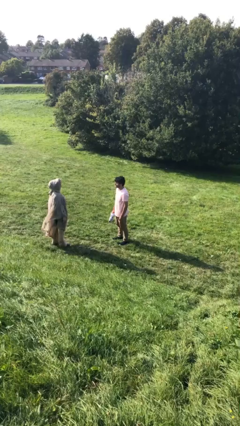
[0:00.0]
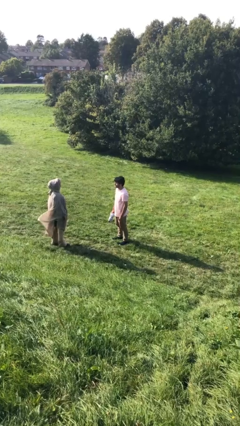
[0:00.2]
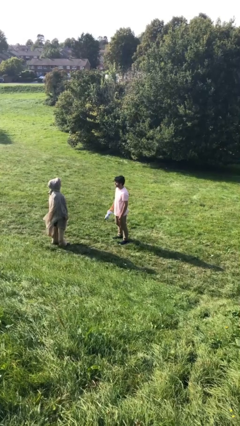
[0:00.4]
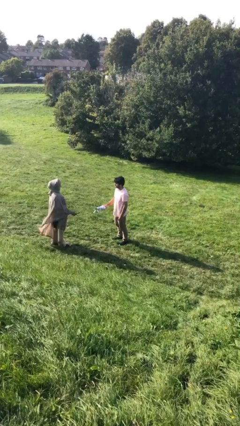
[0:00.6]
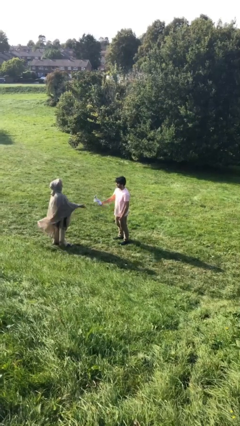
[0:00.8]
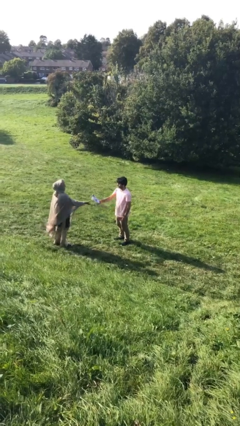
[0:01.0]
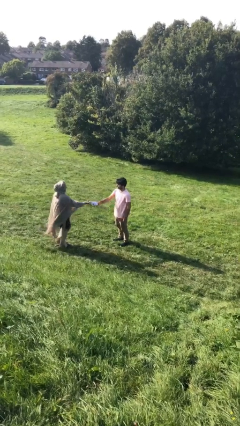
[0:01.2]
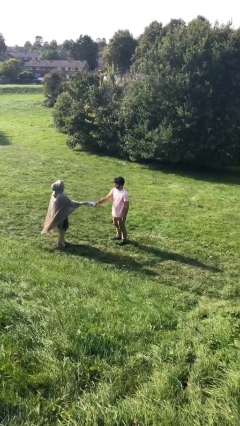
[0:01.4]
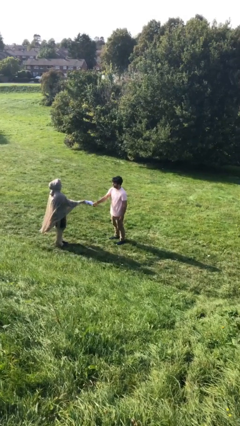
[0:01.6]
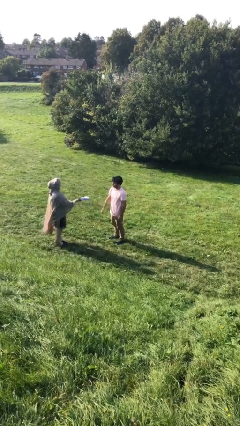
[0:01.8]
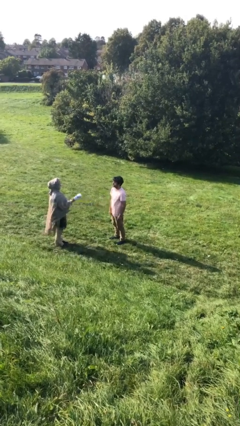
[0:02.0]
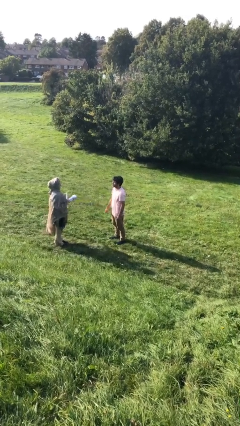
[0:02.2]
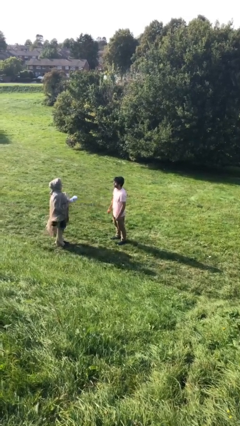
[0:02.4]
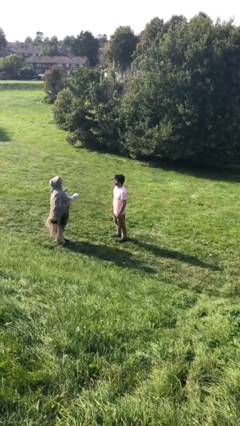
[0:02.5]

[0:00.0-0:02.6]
person transfers object to person

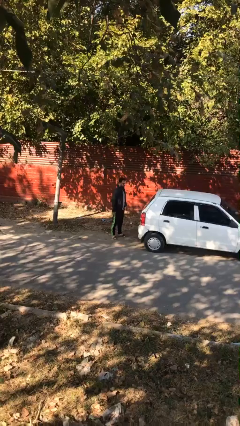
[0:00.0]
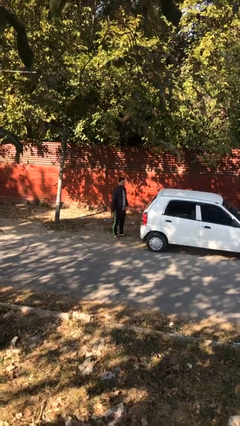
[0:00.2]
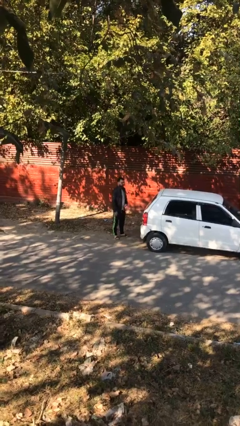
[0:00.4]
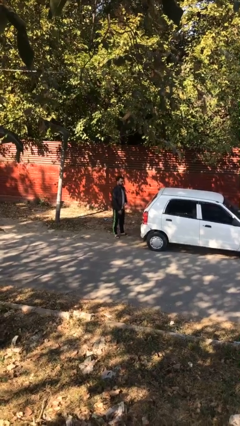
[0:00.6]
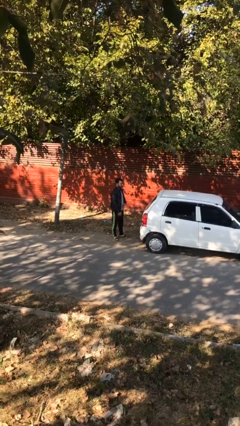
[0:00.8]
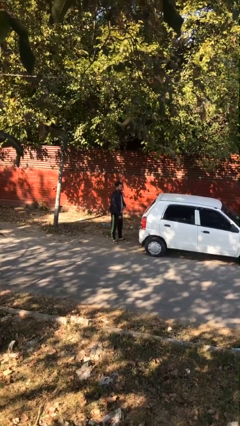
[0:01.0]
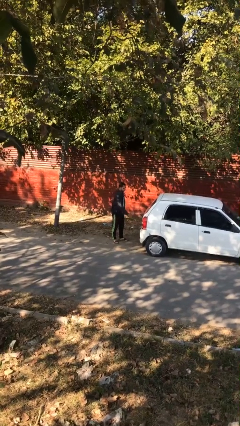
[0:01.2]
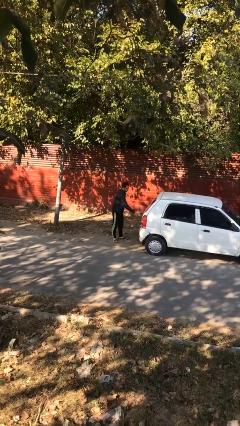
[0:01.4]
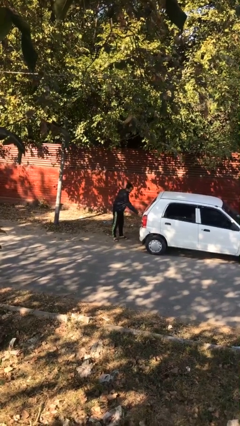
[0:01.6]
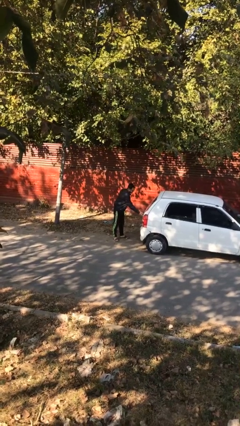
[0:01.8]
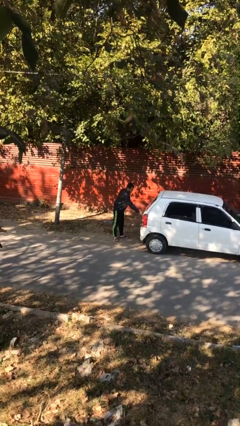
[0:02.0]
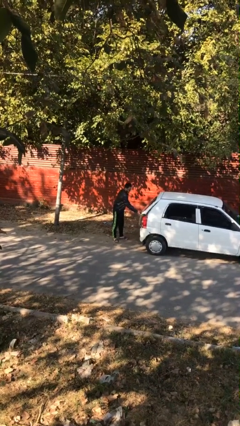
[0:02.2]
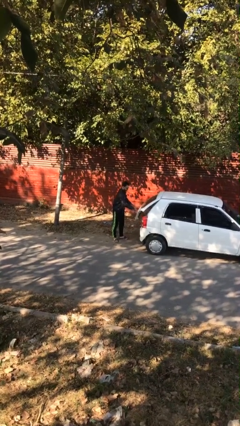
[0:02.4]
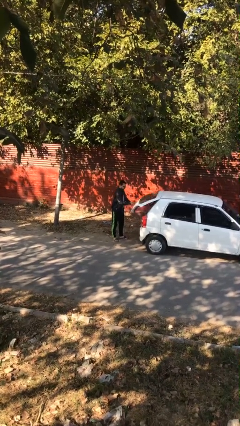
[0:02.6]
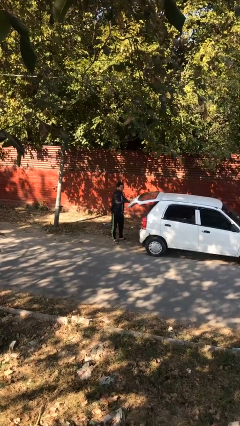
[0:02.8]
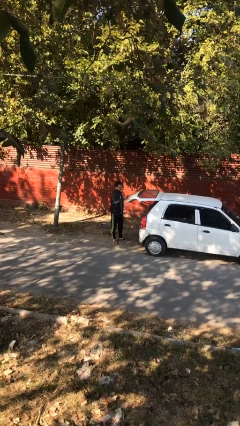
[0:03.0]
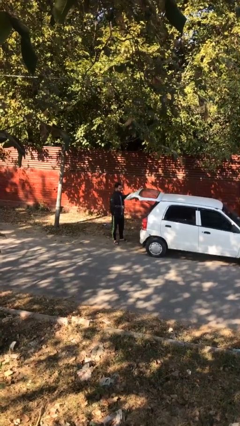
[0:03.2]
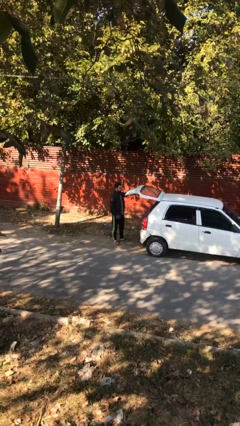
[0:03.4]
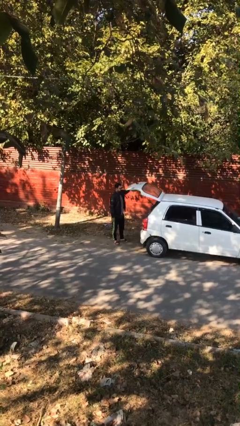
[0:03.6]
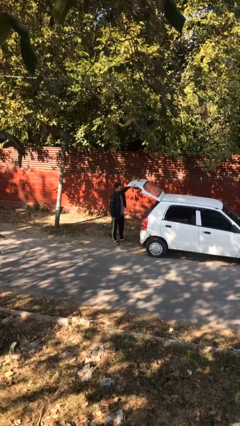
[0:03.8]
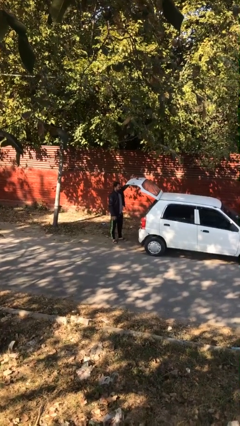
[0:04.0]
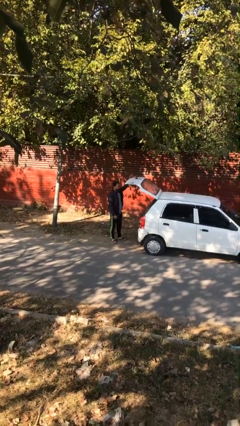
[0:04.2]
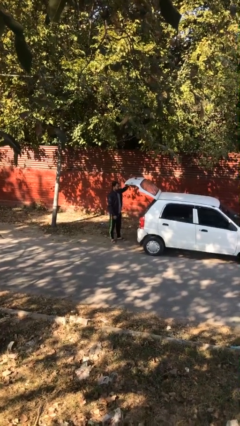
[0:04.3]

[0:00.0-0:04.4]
person opens car trunk

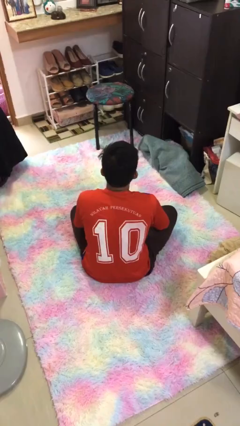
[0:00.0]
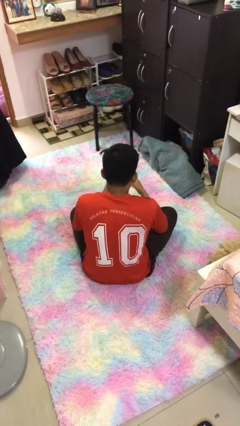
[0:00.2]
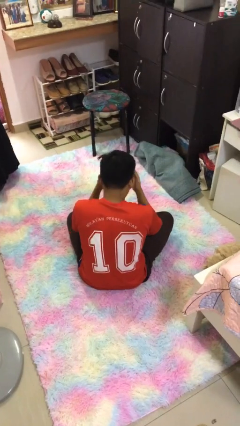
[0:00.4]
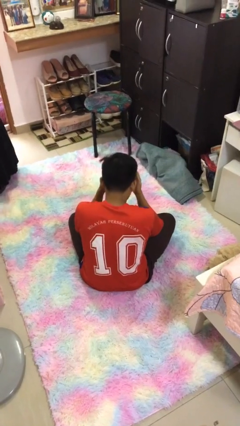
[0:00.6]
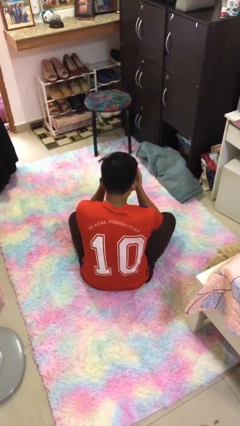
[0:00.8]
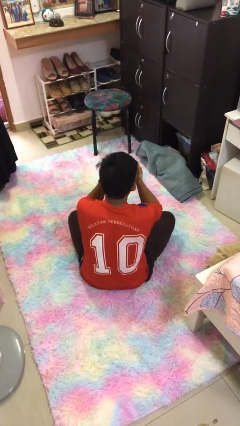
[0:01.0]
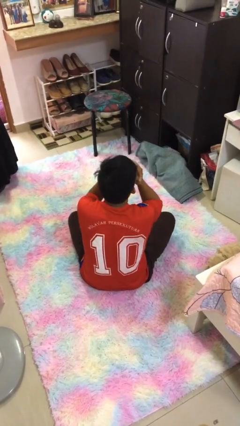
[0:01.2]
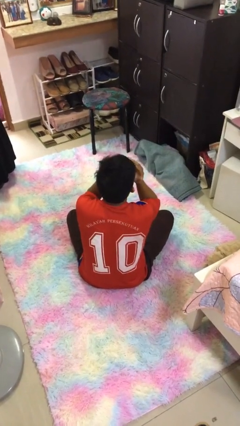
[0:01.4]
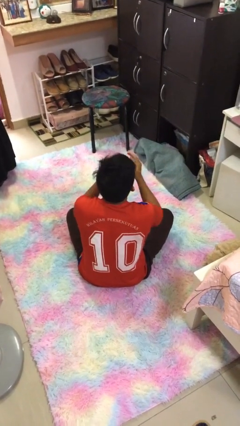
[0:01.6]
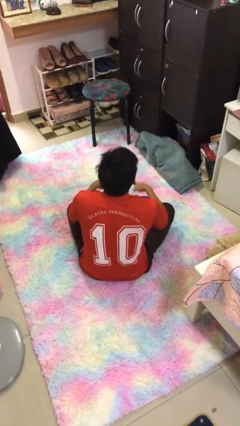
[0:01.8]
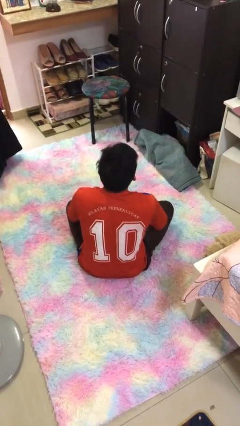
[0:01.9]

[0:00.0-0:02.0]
person covers face with hands

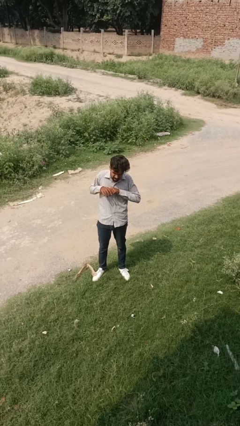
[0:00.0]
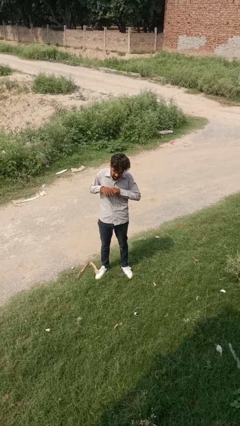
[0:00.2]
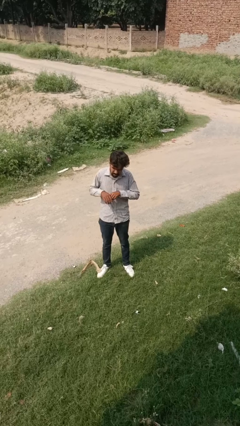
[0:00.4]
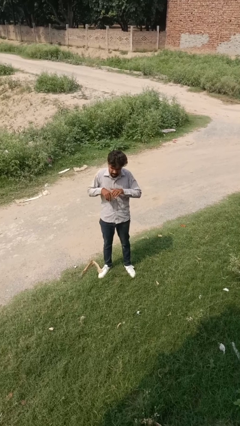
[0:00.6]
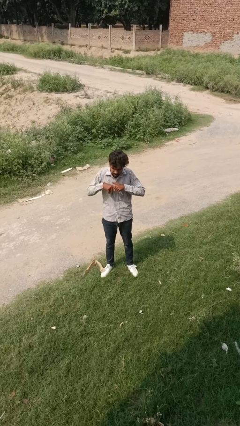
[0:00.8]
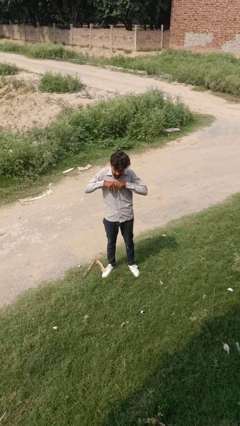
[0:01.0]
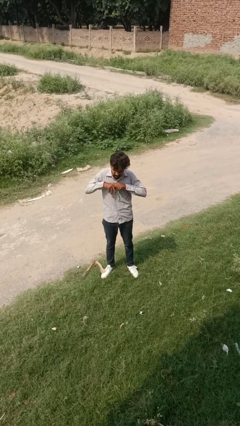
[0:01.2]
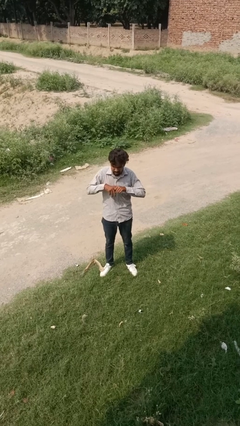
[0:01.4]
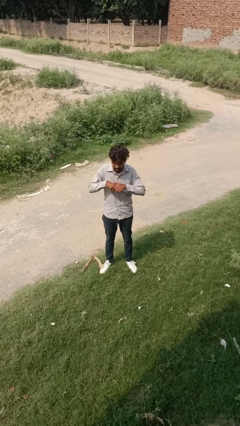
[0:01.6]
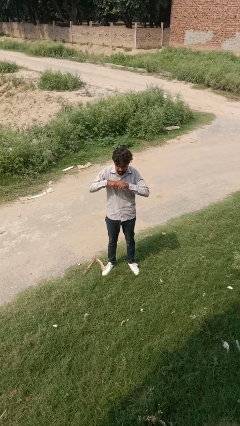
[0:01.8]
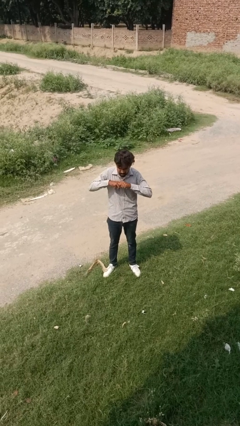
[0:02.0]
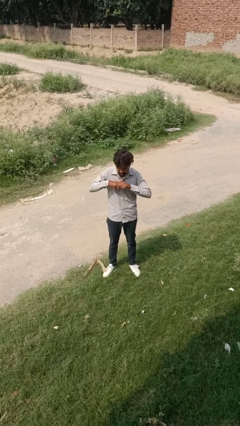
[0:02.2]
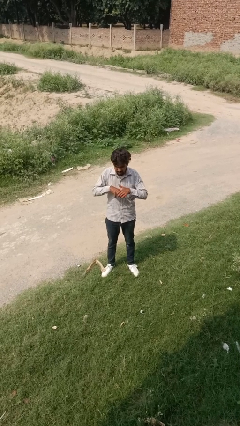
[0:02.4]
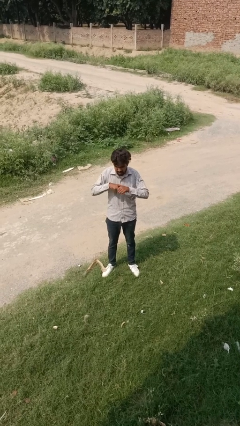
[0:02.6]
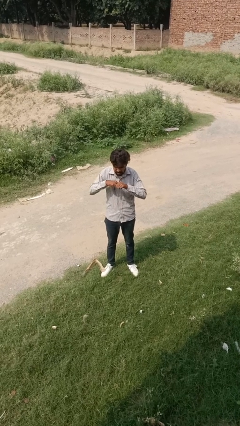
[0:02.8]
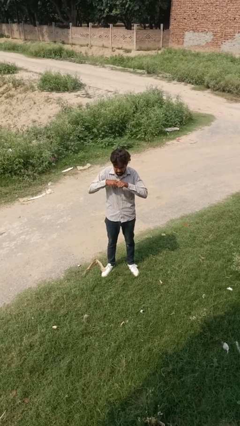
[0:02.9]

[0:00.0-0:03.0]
person cracks knuckles

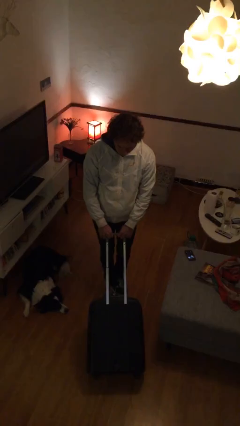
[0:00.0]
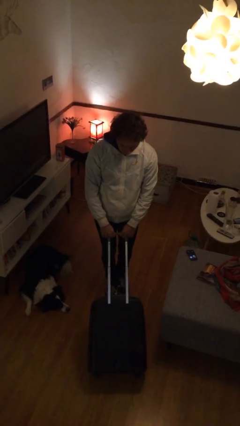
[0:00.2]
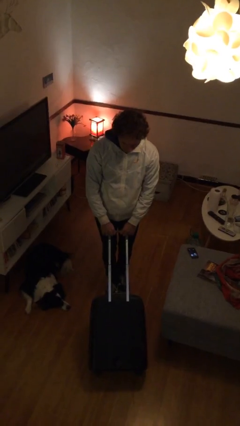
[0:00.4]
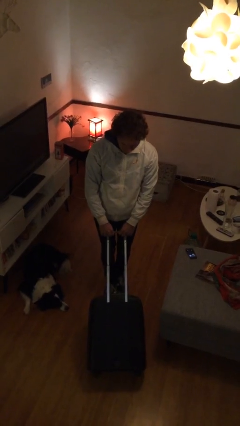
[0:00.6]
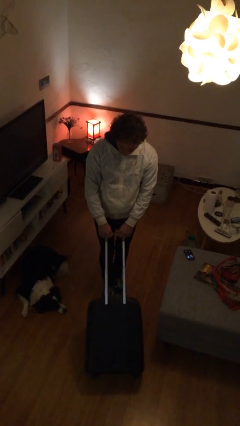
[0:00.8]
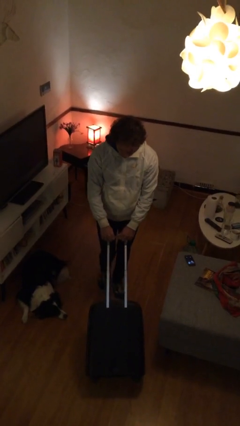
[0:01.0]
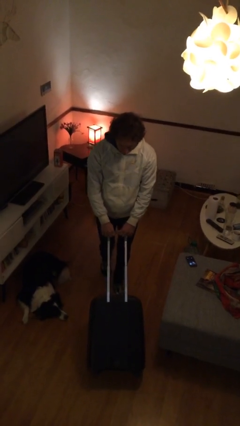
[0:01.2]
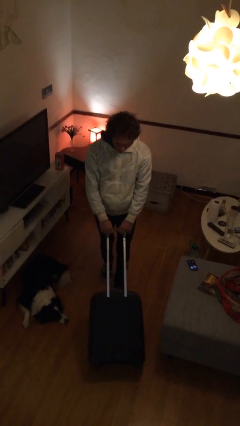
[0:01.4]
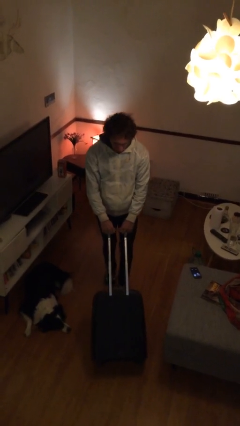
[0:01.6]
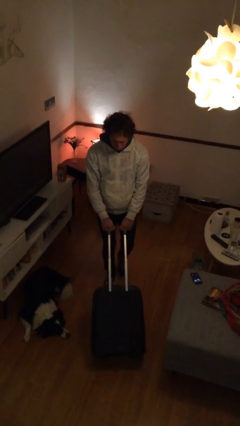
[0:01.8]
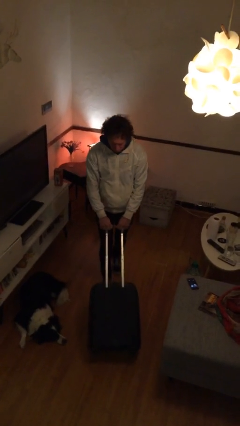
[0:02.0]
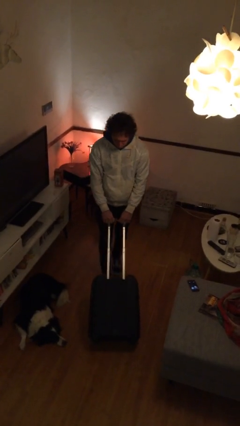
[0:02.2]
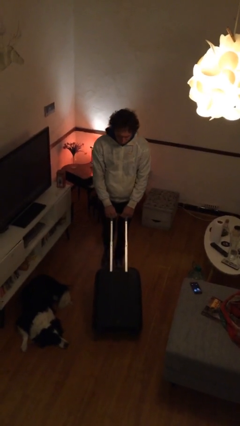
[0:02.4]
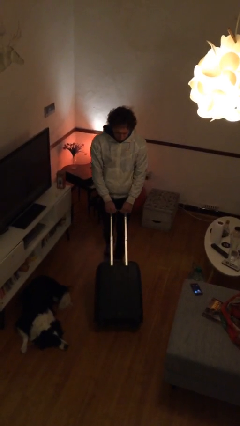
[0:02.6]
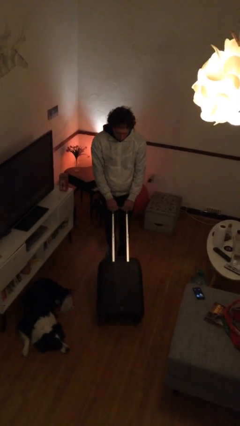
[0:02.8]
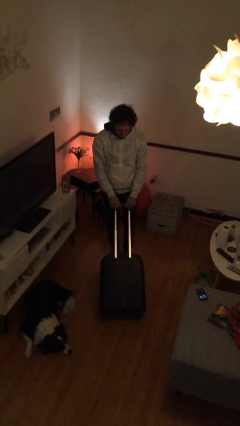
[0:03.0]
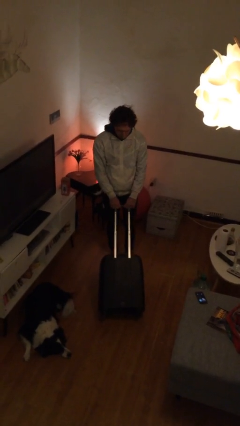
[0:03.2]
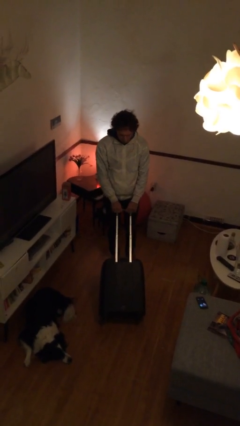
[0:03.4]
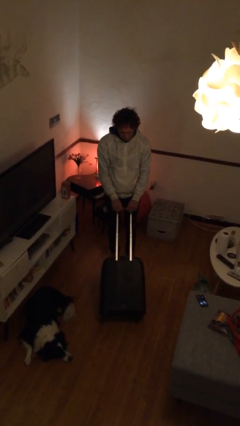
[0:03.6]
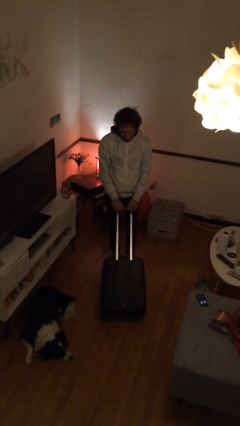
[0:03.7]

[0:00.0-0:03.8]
person pulls wheeled cart

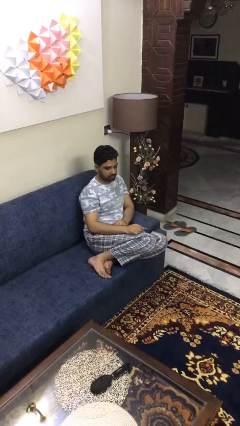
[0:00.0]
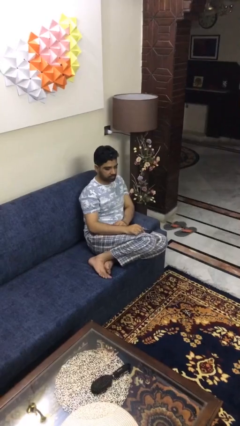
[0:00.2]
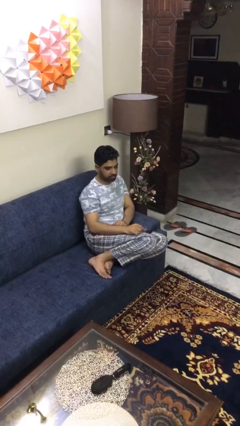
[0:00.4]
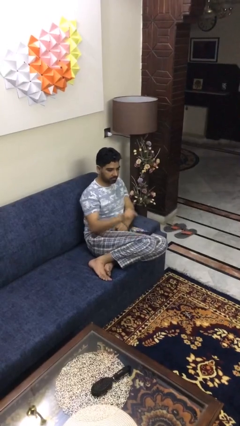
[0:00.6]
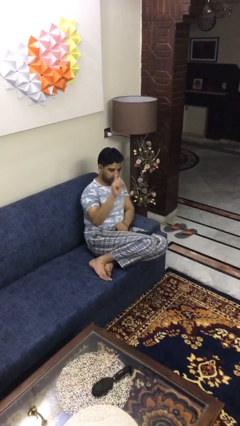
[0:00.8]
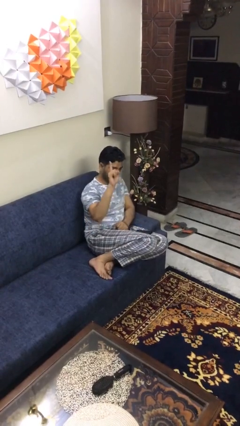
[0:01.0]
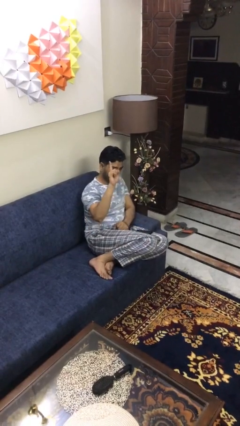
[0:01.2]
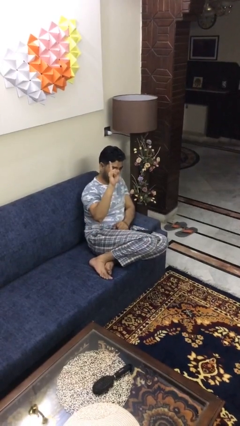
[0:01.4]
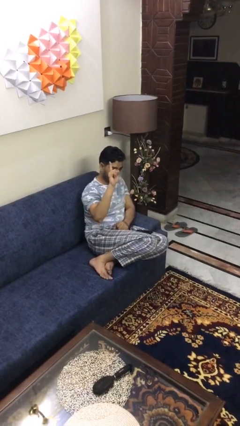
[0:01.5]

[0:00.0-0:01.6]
person gestures number one
